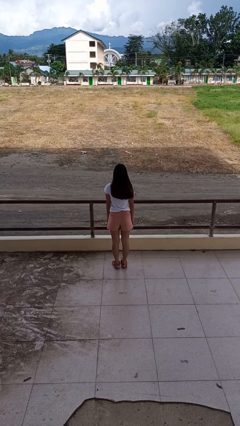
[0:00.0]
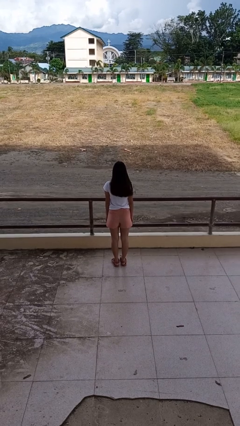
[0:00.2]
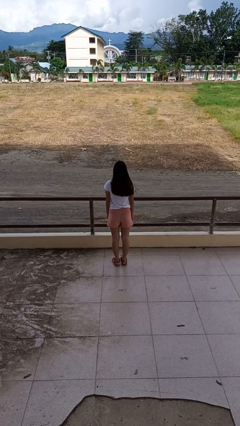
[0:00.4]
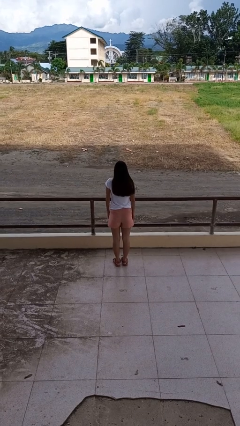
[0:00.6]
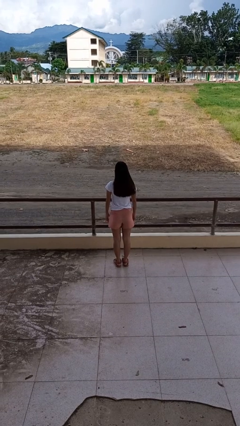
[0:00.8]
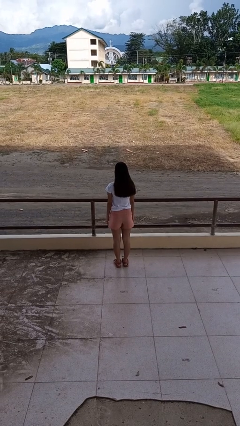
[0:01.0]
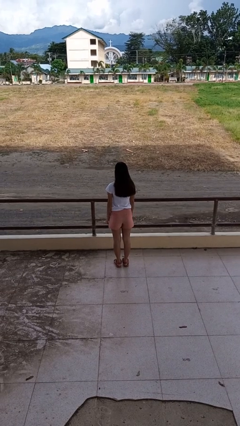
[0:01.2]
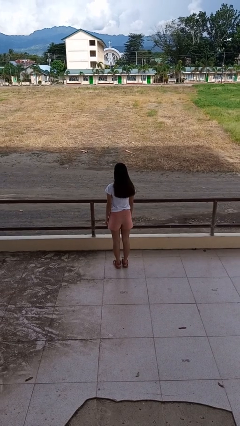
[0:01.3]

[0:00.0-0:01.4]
person shrugs

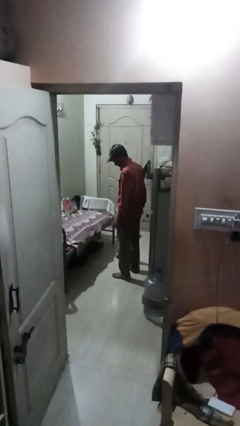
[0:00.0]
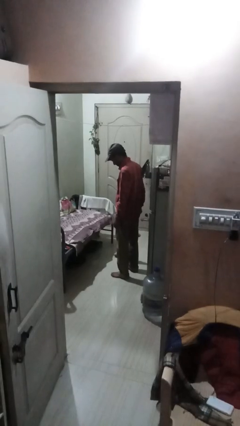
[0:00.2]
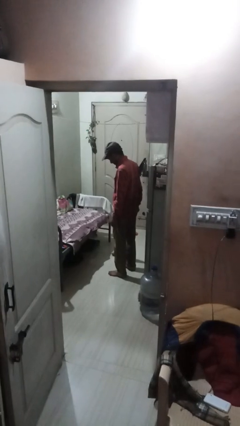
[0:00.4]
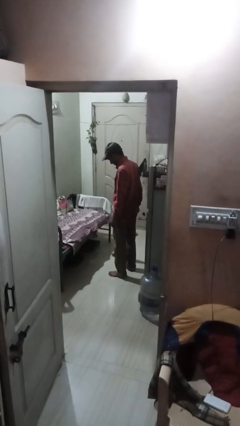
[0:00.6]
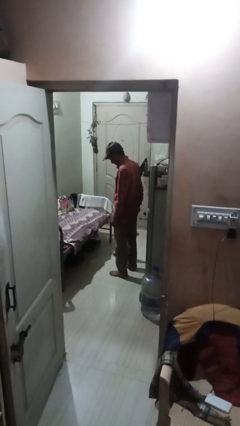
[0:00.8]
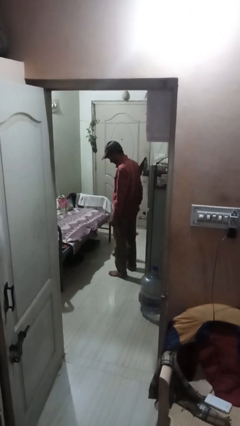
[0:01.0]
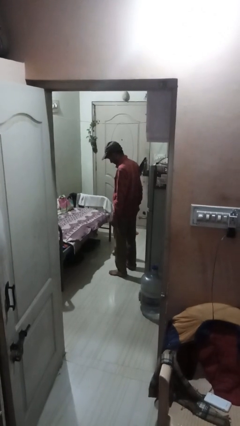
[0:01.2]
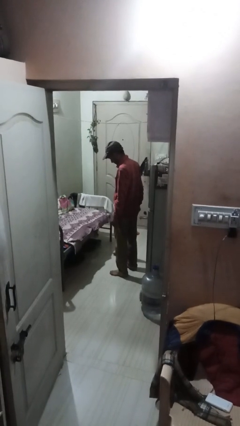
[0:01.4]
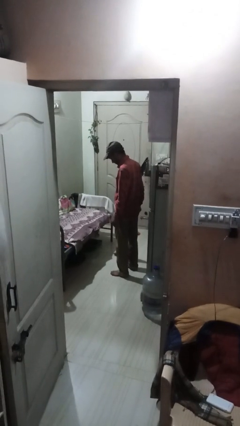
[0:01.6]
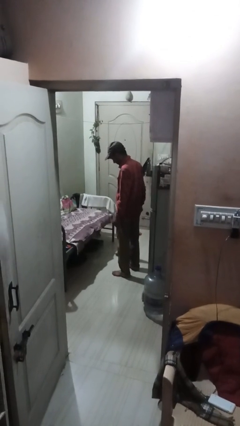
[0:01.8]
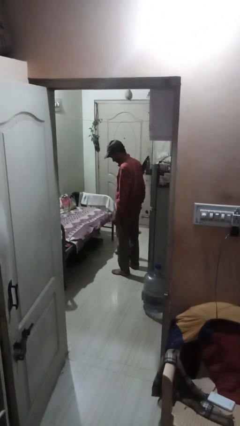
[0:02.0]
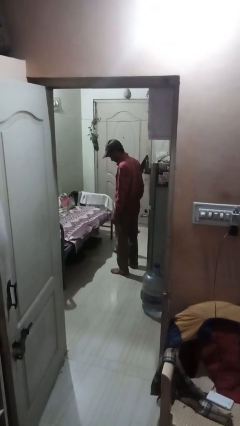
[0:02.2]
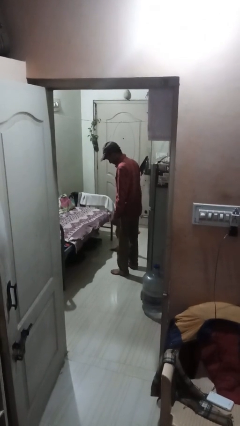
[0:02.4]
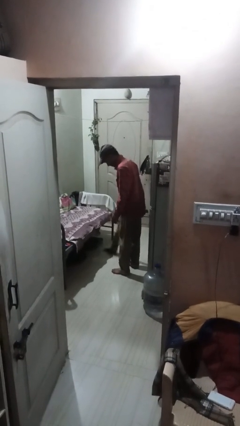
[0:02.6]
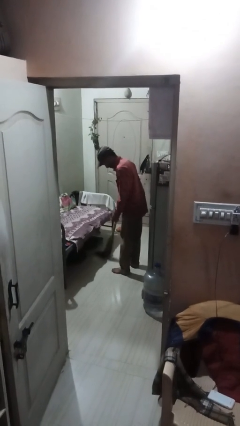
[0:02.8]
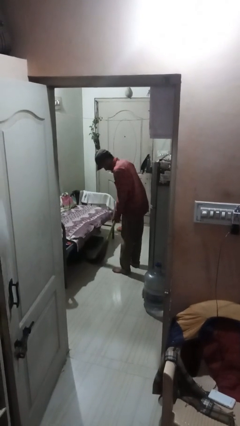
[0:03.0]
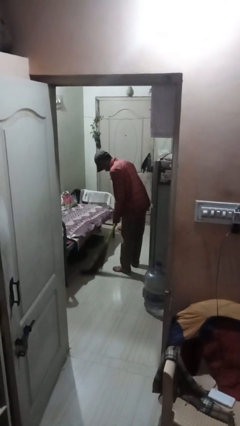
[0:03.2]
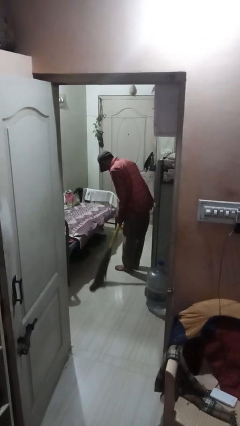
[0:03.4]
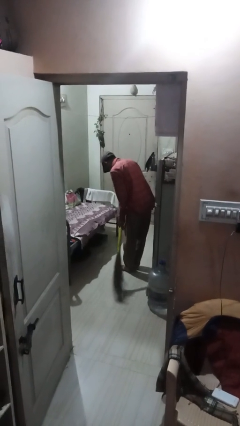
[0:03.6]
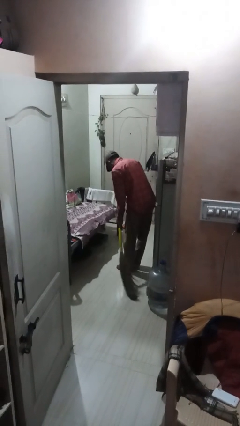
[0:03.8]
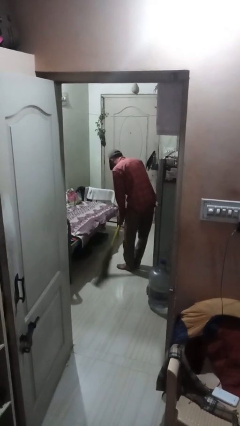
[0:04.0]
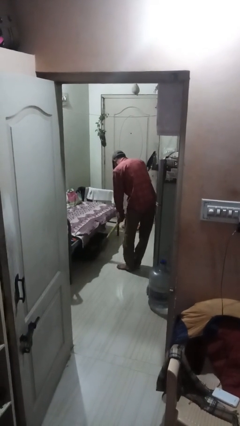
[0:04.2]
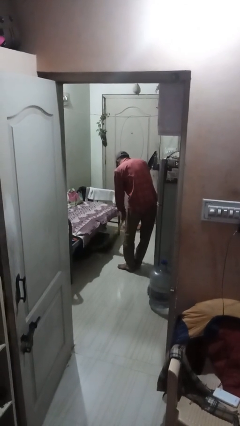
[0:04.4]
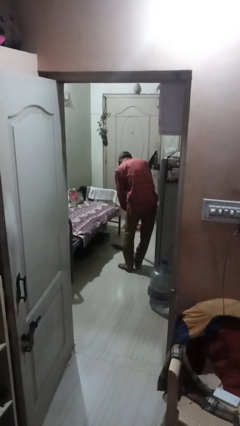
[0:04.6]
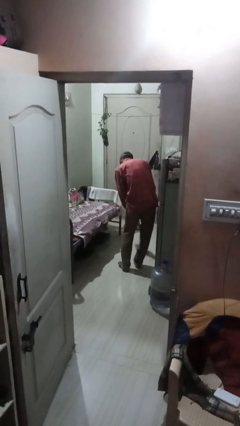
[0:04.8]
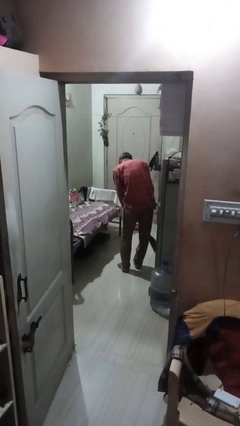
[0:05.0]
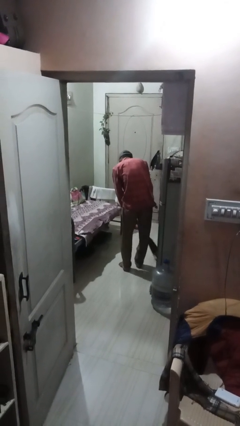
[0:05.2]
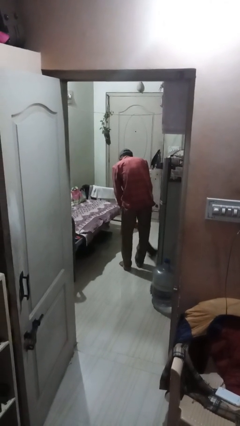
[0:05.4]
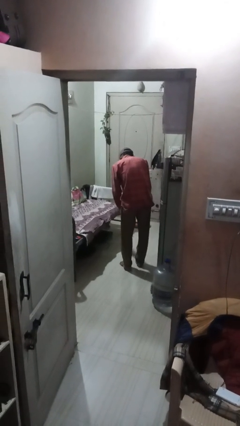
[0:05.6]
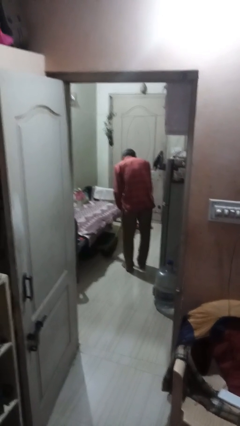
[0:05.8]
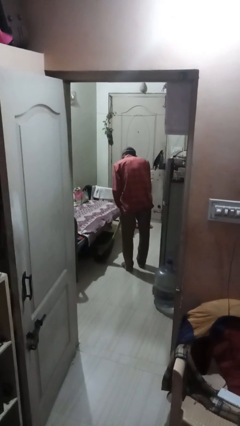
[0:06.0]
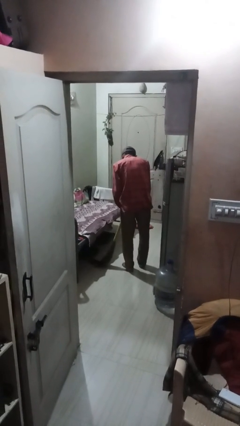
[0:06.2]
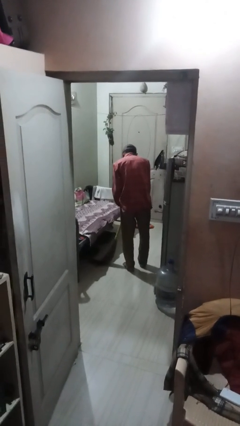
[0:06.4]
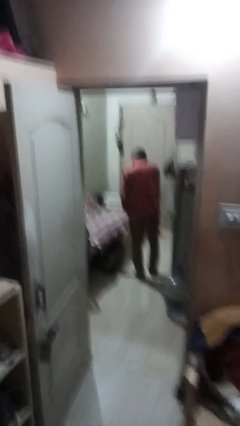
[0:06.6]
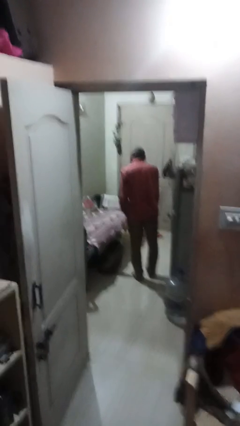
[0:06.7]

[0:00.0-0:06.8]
person sweeps floor

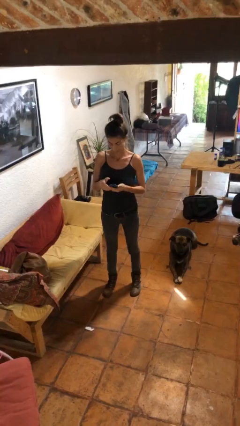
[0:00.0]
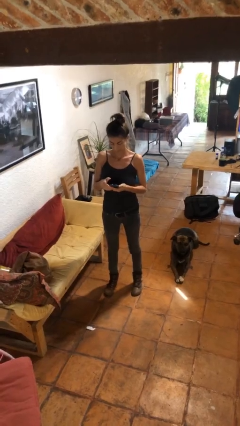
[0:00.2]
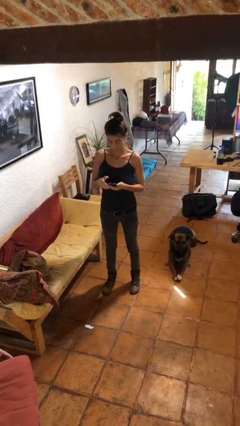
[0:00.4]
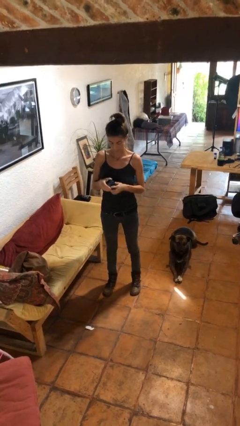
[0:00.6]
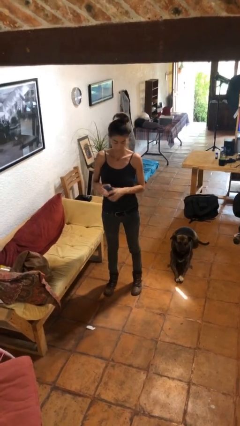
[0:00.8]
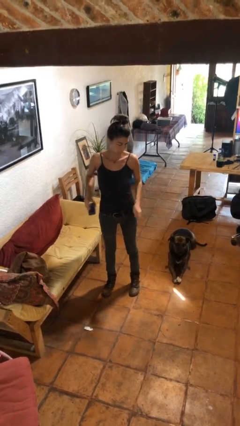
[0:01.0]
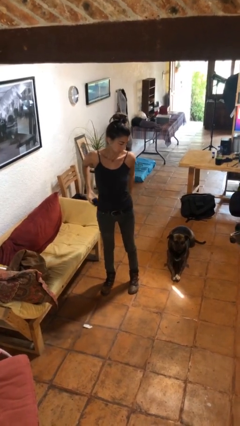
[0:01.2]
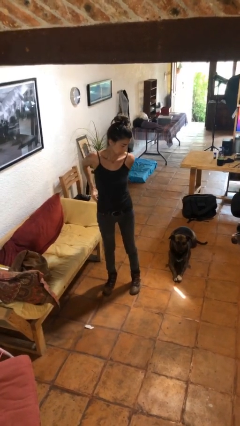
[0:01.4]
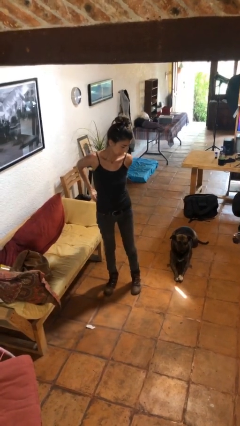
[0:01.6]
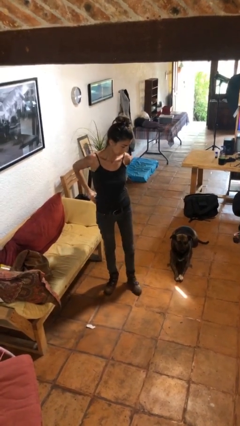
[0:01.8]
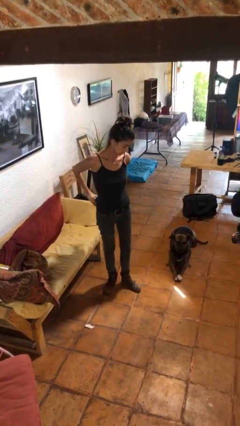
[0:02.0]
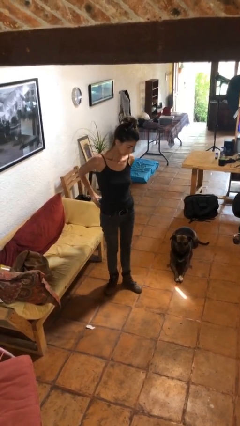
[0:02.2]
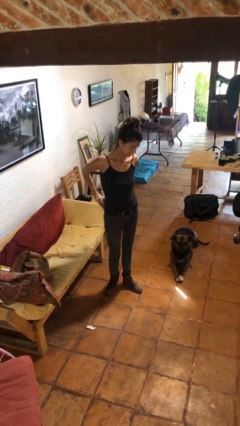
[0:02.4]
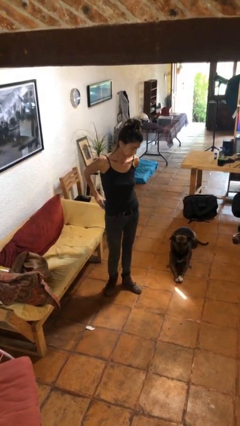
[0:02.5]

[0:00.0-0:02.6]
person puts phone into pocket

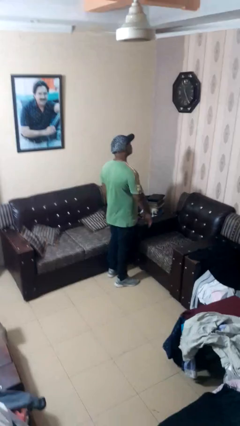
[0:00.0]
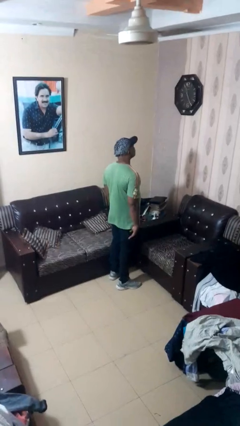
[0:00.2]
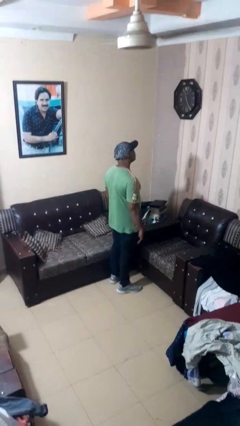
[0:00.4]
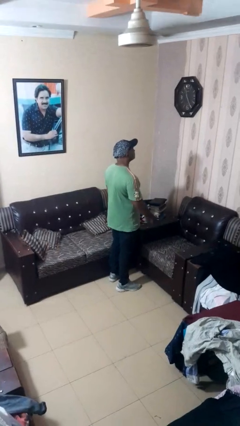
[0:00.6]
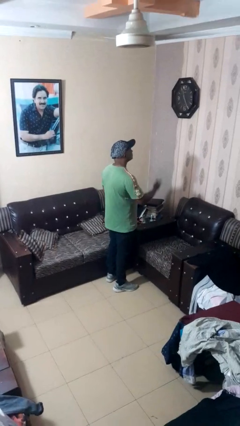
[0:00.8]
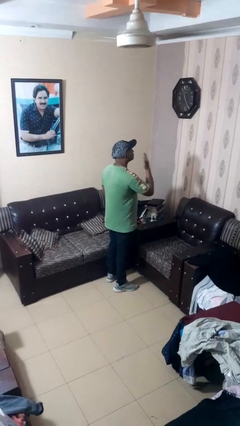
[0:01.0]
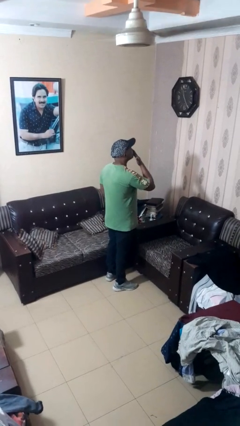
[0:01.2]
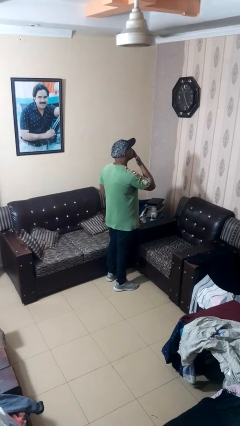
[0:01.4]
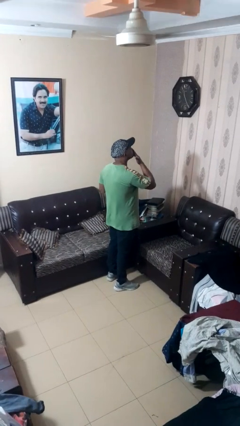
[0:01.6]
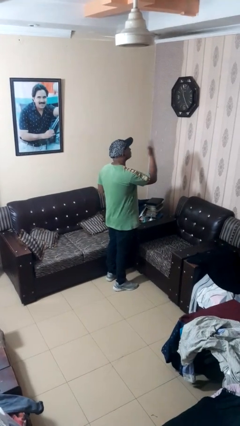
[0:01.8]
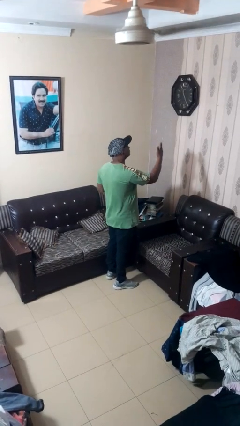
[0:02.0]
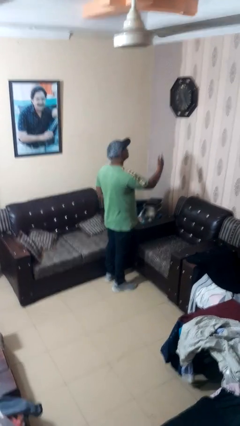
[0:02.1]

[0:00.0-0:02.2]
person gestures blow kiss

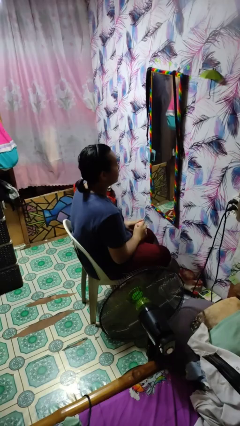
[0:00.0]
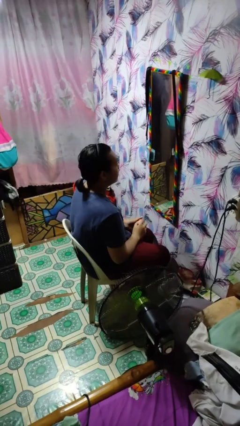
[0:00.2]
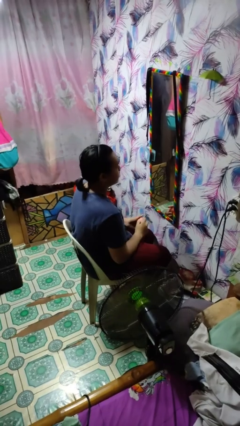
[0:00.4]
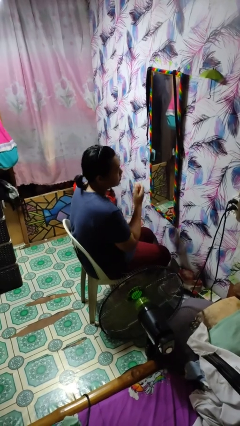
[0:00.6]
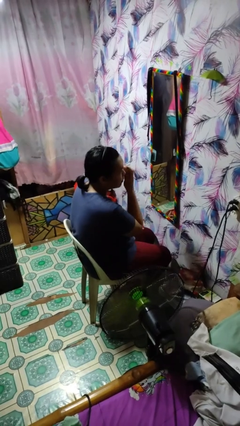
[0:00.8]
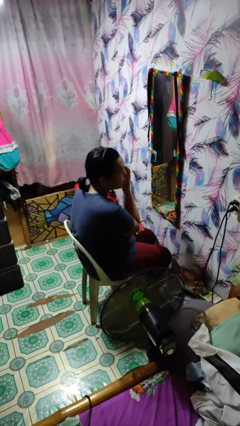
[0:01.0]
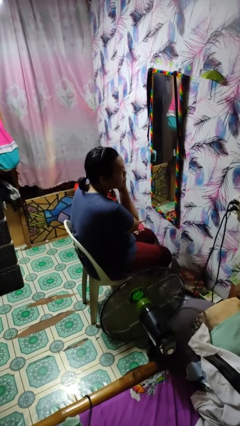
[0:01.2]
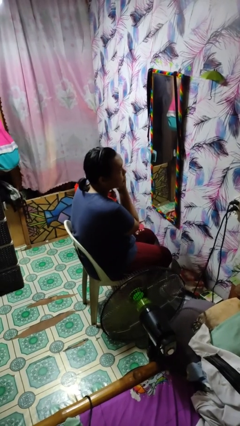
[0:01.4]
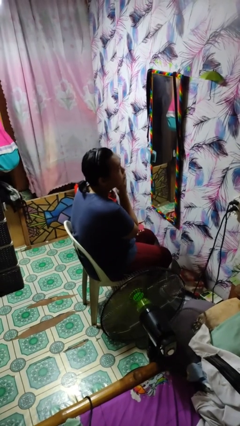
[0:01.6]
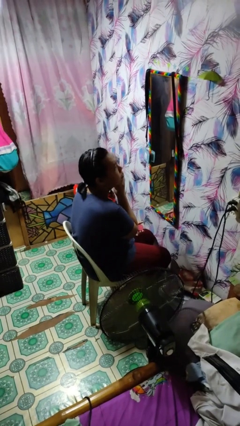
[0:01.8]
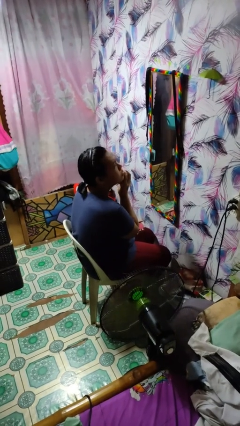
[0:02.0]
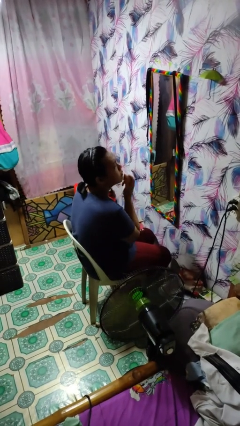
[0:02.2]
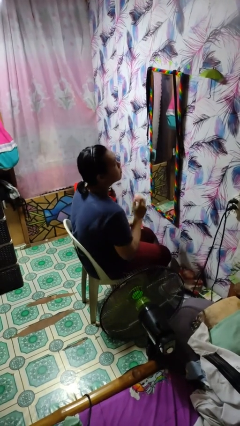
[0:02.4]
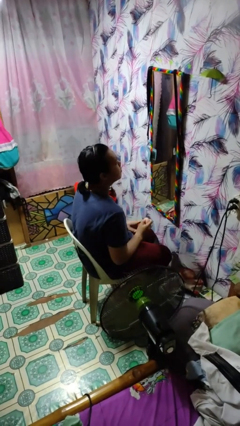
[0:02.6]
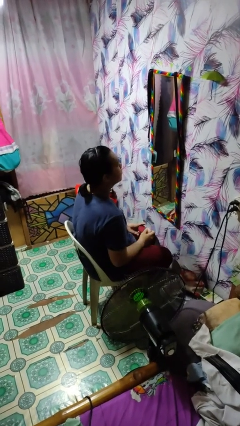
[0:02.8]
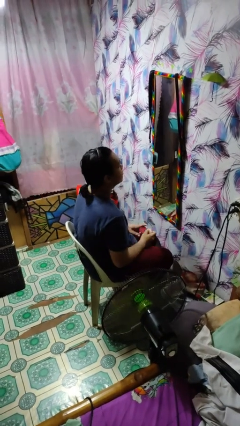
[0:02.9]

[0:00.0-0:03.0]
person applies foundation makeup

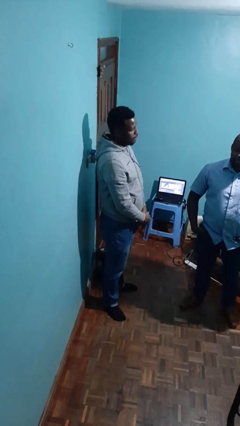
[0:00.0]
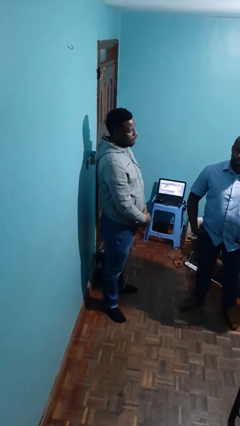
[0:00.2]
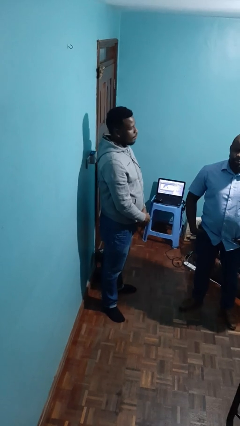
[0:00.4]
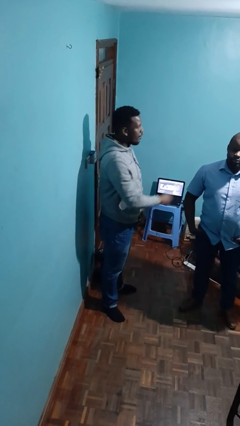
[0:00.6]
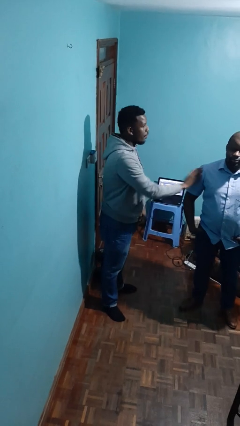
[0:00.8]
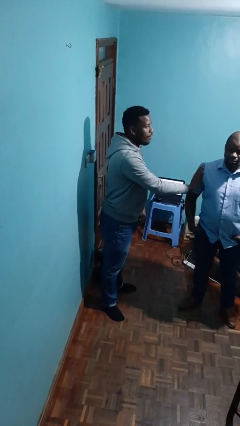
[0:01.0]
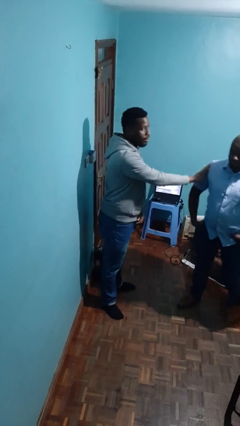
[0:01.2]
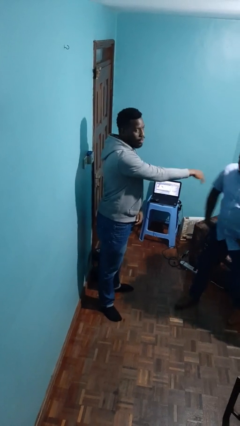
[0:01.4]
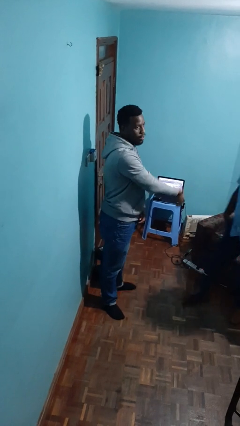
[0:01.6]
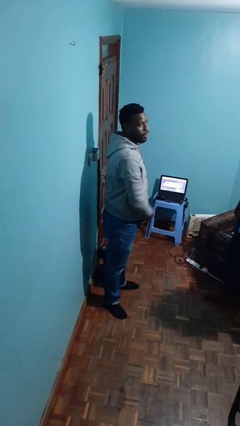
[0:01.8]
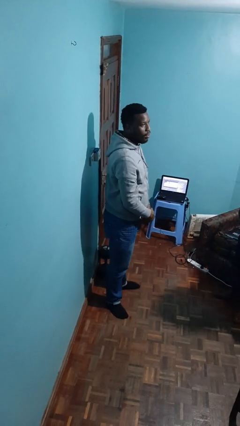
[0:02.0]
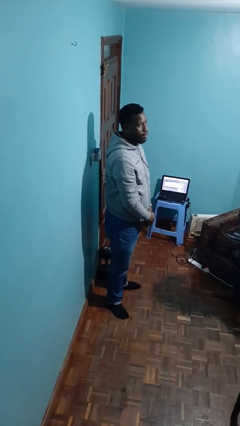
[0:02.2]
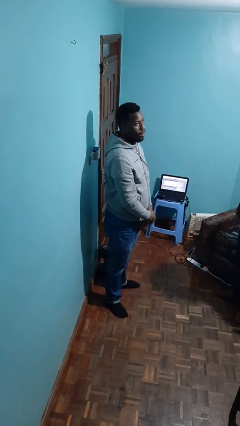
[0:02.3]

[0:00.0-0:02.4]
person shoves person
